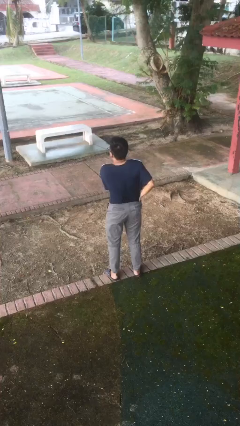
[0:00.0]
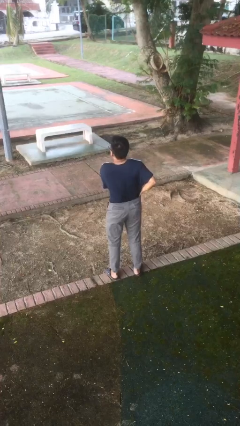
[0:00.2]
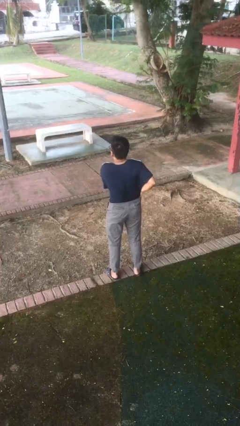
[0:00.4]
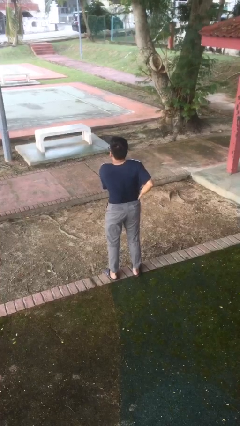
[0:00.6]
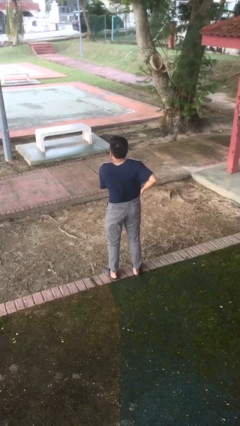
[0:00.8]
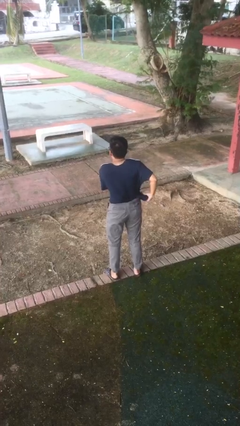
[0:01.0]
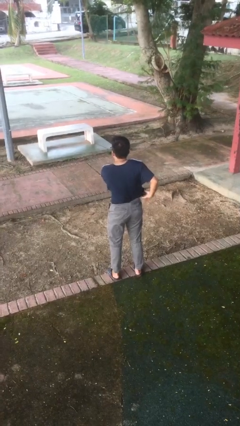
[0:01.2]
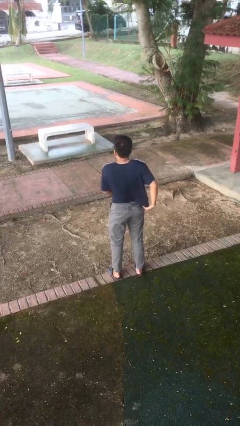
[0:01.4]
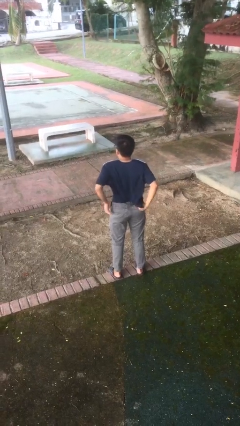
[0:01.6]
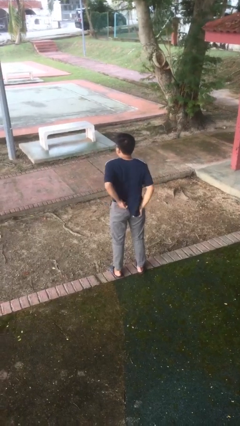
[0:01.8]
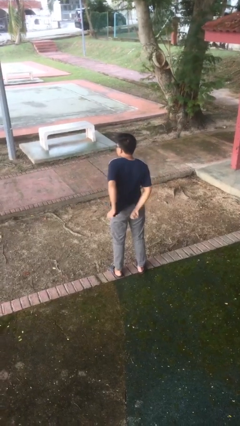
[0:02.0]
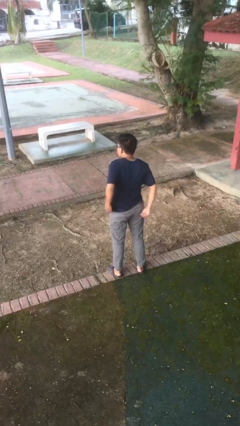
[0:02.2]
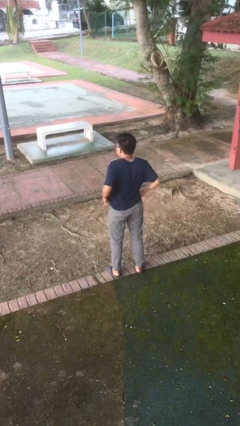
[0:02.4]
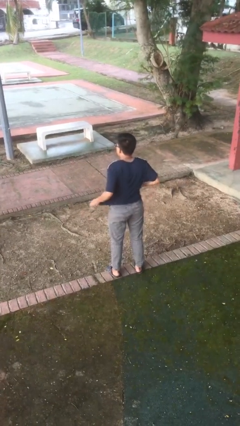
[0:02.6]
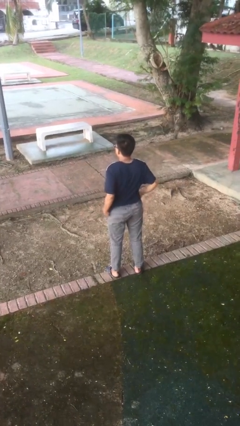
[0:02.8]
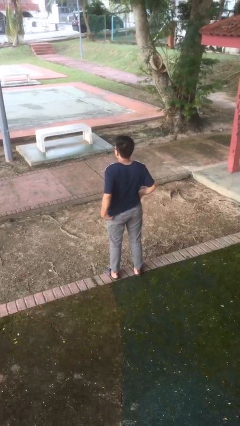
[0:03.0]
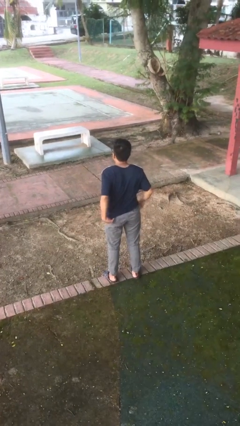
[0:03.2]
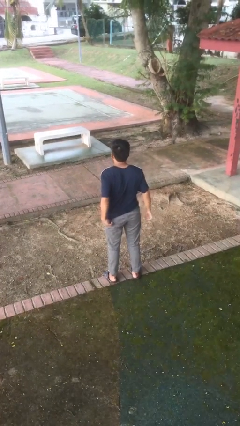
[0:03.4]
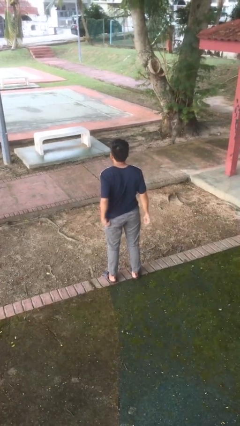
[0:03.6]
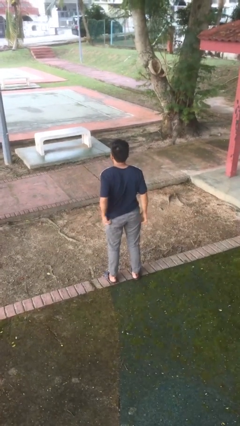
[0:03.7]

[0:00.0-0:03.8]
person untucks shirt

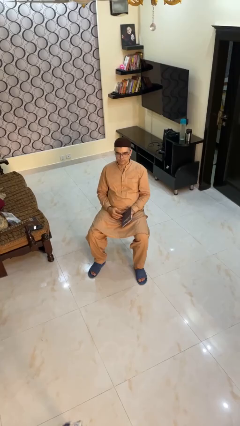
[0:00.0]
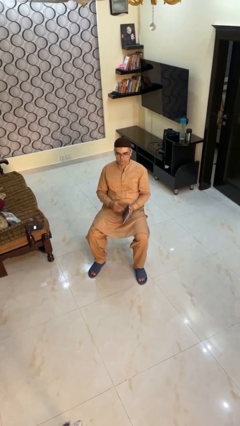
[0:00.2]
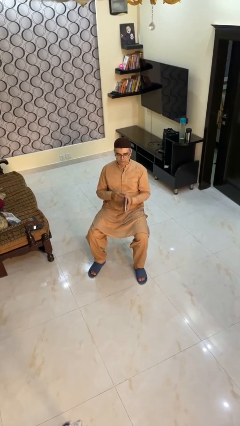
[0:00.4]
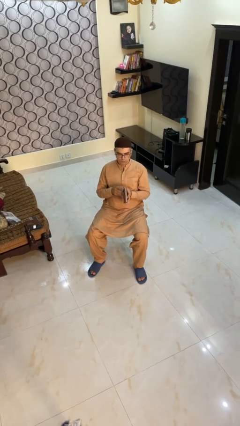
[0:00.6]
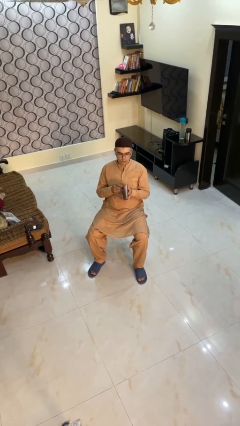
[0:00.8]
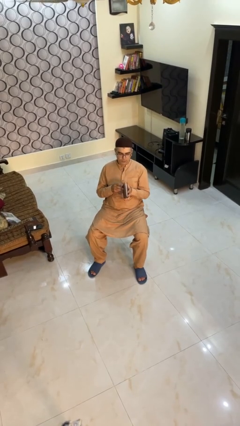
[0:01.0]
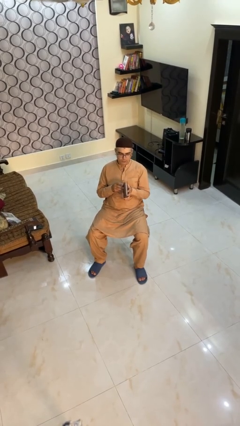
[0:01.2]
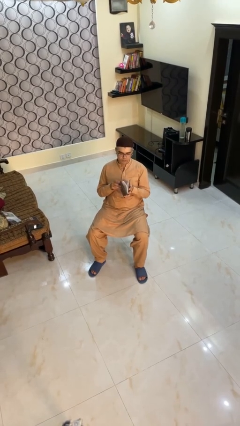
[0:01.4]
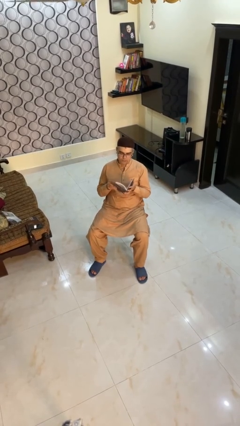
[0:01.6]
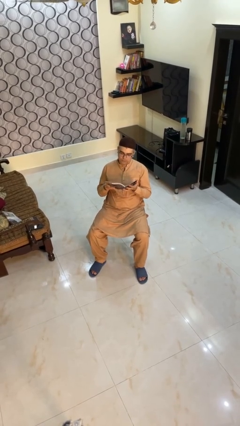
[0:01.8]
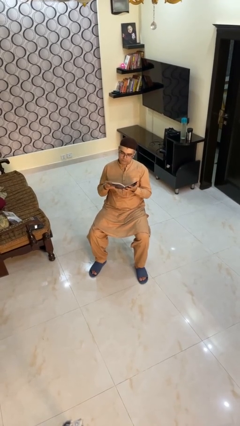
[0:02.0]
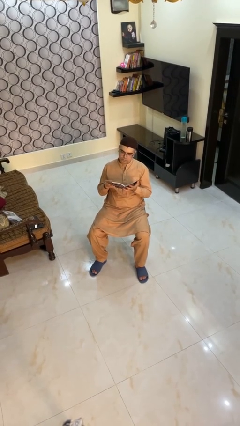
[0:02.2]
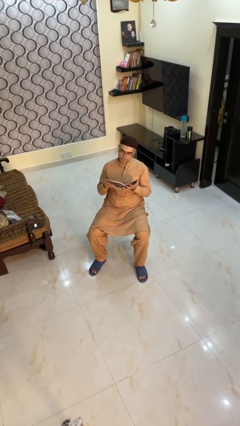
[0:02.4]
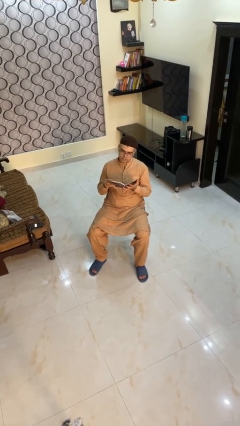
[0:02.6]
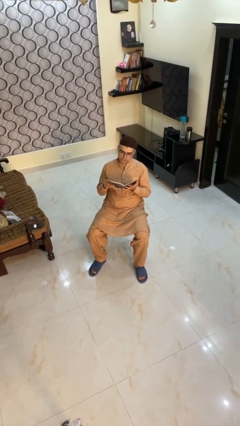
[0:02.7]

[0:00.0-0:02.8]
person reads book

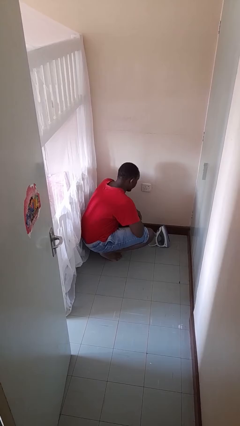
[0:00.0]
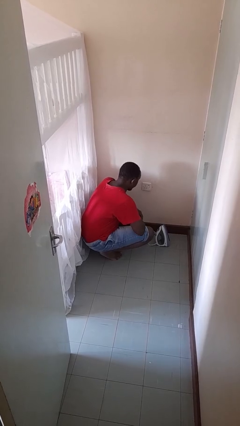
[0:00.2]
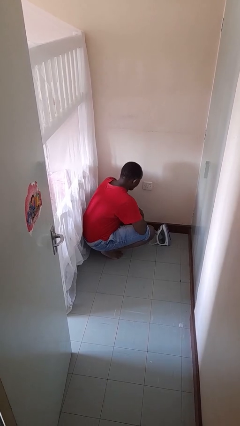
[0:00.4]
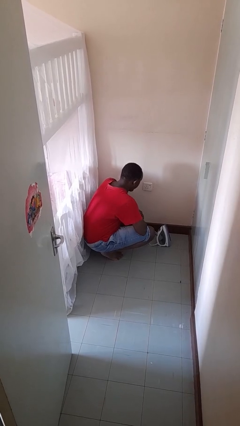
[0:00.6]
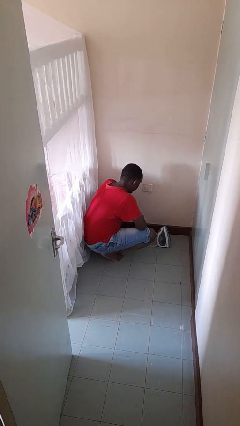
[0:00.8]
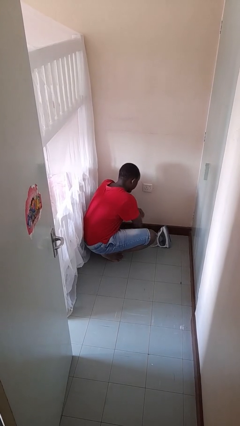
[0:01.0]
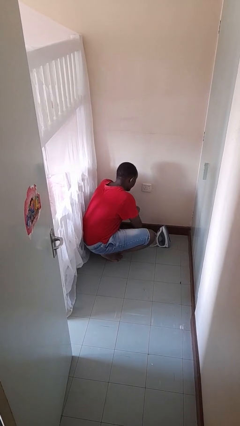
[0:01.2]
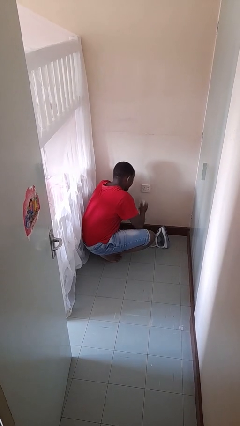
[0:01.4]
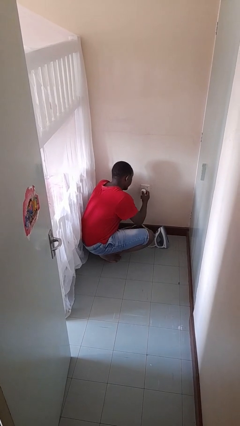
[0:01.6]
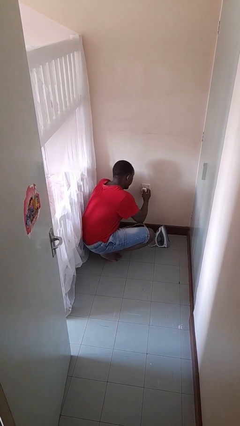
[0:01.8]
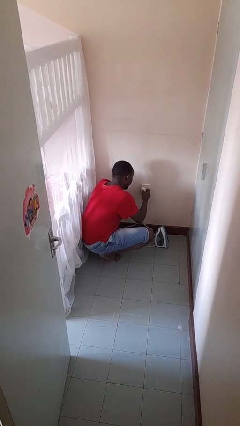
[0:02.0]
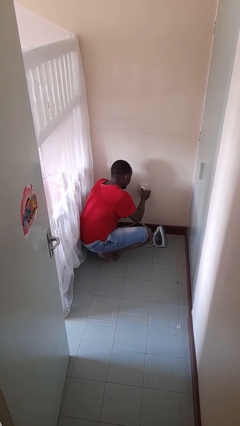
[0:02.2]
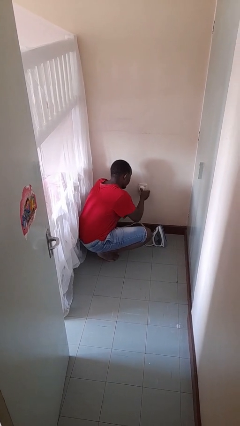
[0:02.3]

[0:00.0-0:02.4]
person plugs into electrical socket

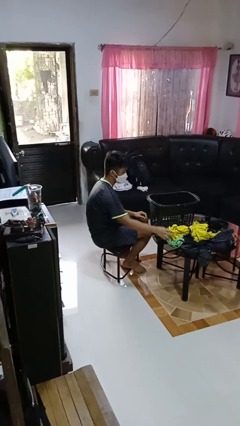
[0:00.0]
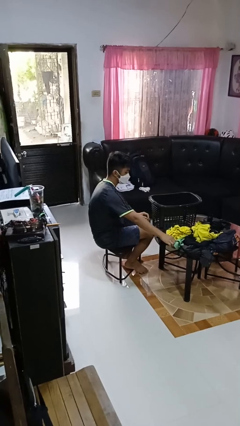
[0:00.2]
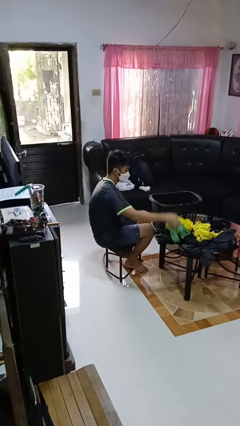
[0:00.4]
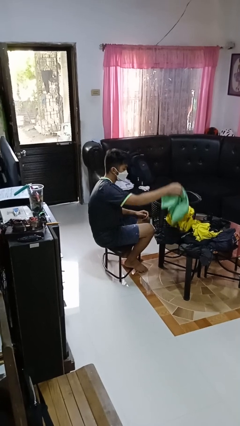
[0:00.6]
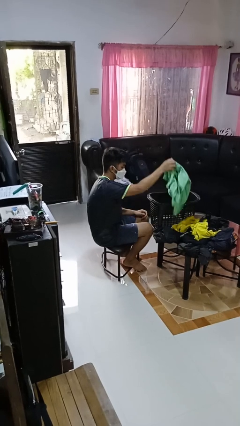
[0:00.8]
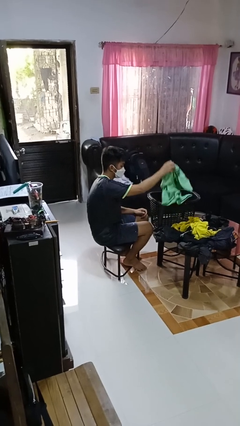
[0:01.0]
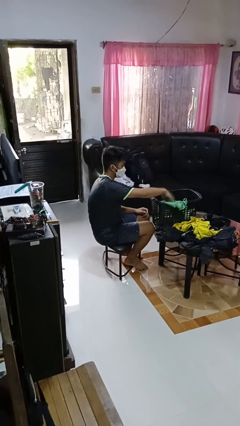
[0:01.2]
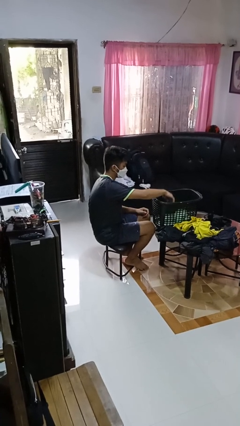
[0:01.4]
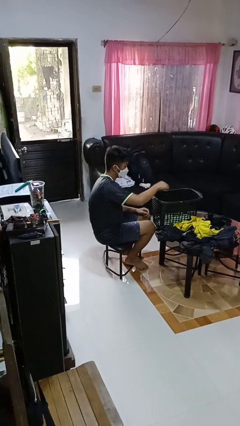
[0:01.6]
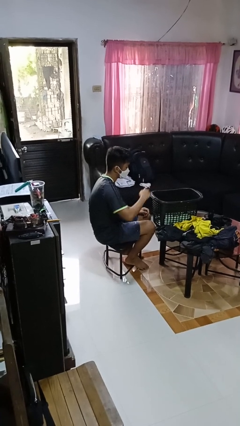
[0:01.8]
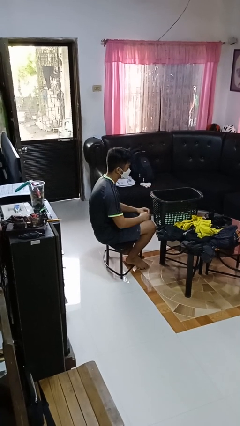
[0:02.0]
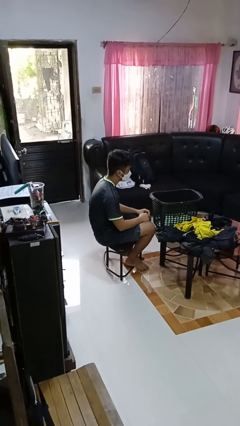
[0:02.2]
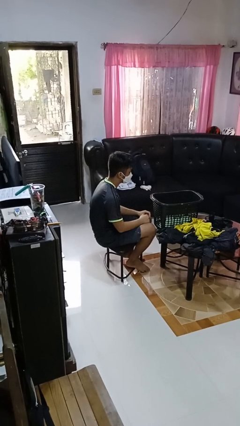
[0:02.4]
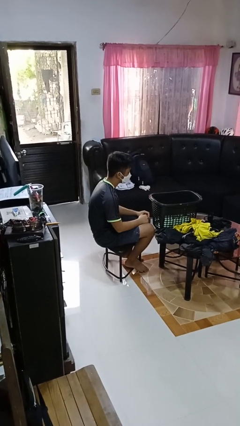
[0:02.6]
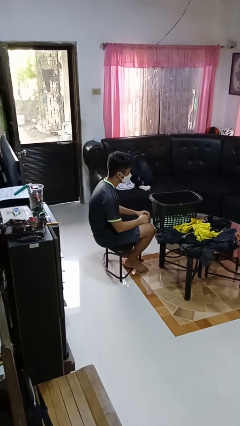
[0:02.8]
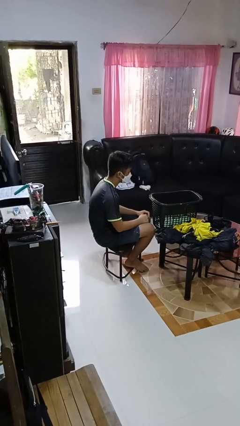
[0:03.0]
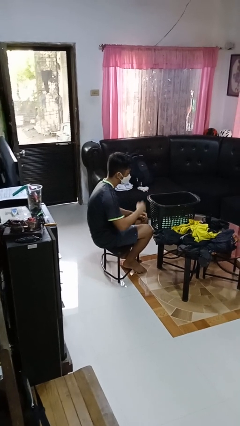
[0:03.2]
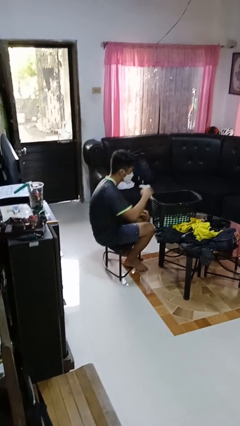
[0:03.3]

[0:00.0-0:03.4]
person puts object into basket

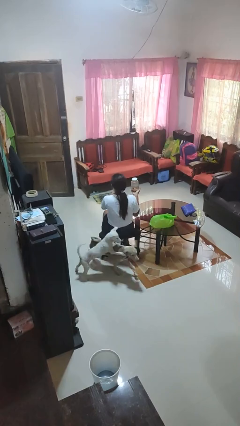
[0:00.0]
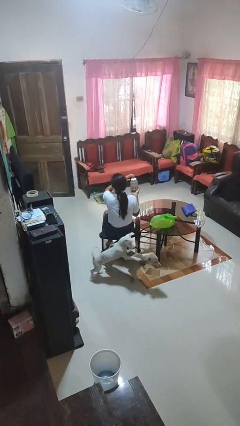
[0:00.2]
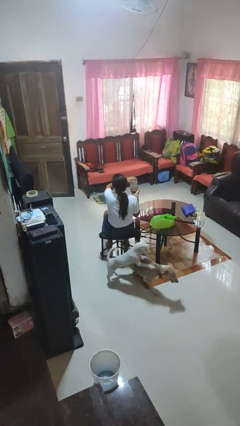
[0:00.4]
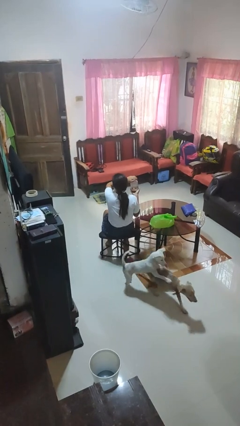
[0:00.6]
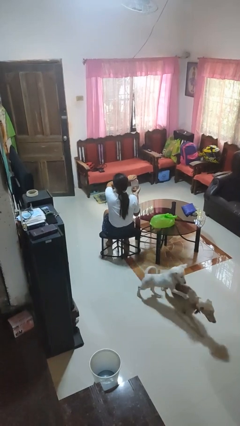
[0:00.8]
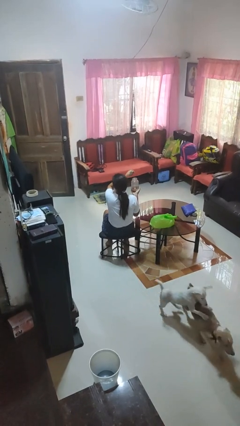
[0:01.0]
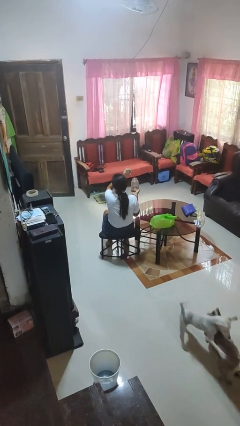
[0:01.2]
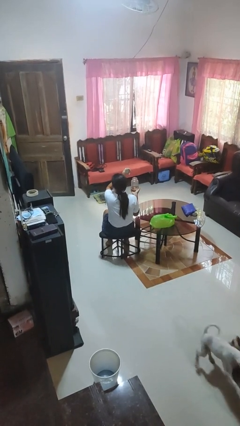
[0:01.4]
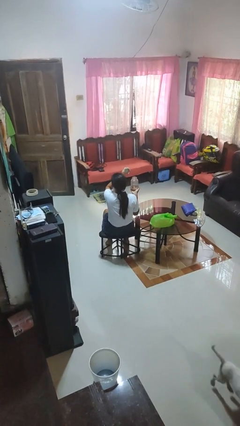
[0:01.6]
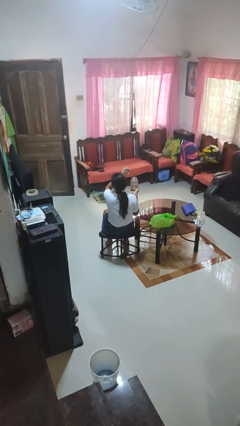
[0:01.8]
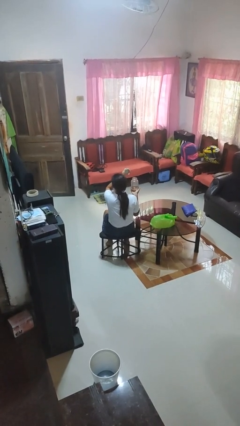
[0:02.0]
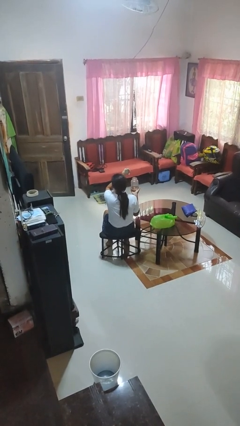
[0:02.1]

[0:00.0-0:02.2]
person opens jar

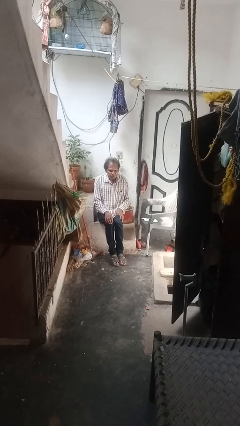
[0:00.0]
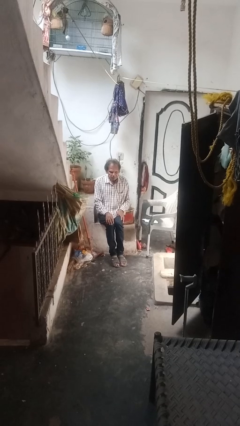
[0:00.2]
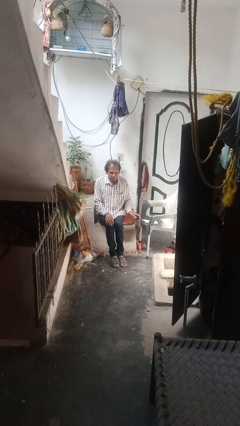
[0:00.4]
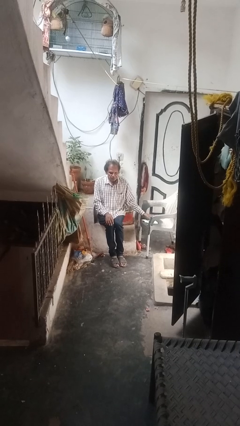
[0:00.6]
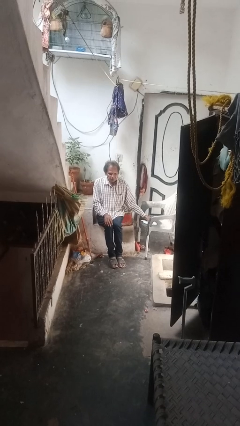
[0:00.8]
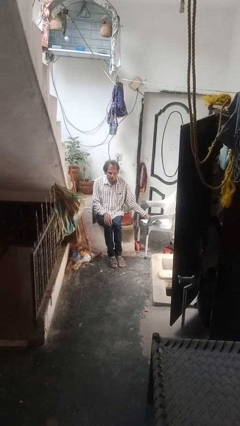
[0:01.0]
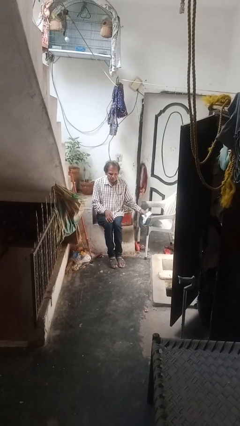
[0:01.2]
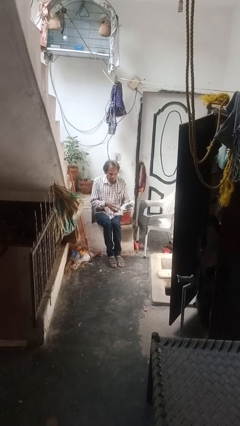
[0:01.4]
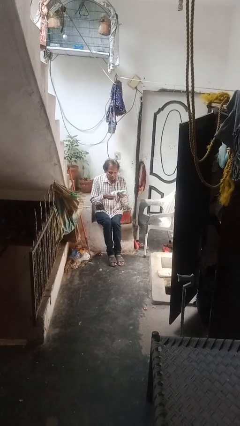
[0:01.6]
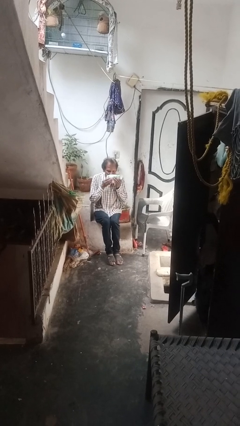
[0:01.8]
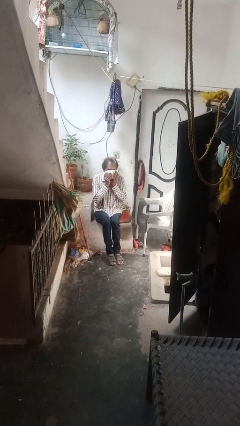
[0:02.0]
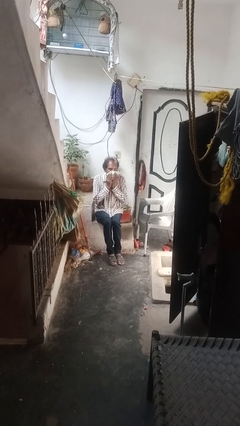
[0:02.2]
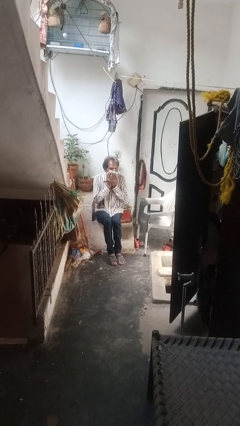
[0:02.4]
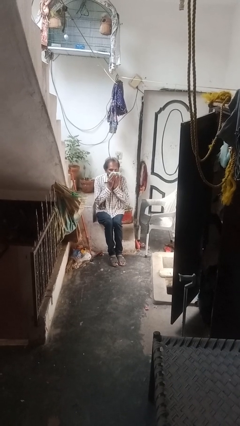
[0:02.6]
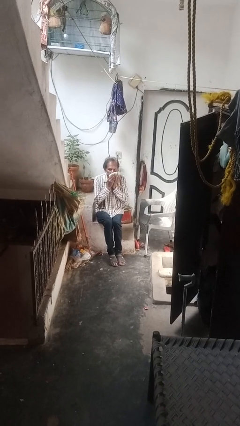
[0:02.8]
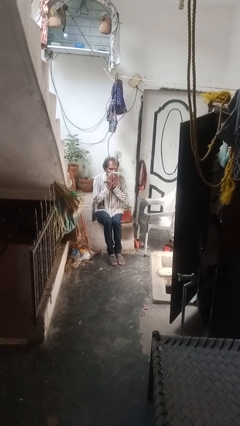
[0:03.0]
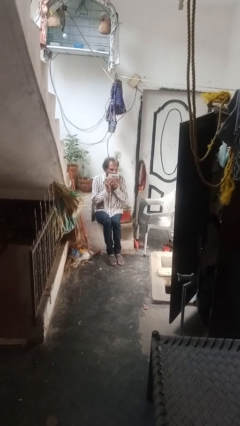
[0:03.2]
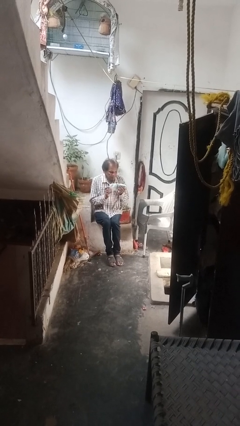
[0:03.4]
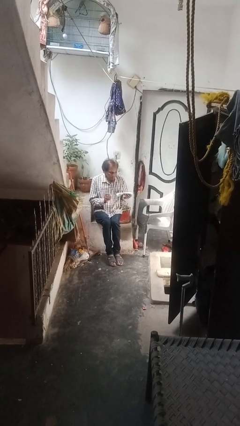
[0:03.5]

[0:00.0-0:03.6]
person wipes mouth with napkin
